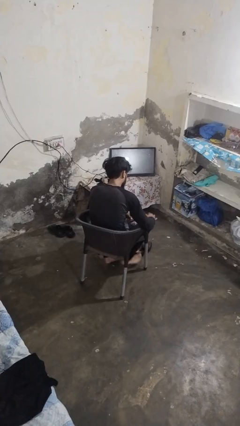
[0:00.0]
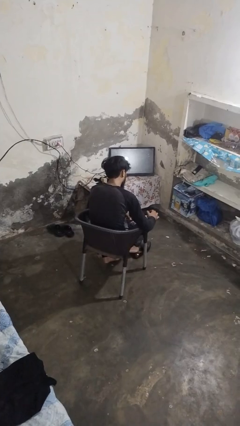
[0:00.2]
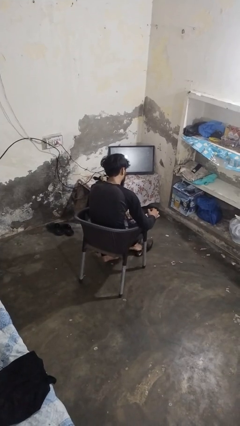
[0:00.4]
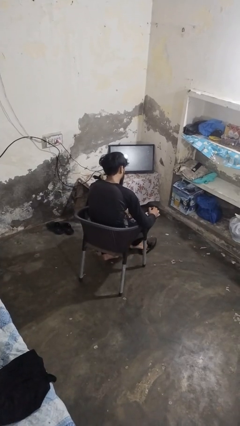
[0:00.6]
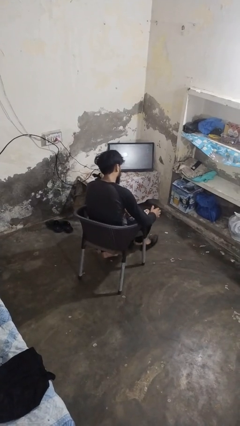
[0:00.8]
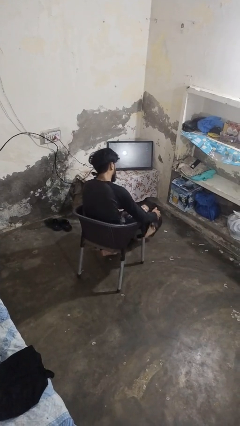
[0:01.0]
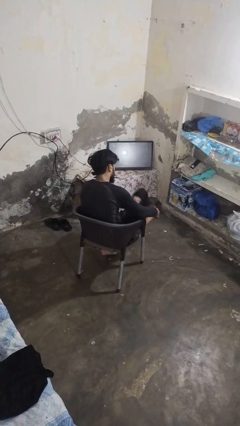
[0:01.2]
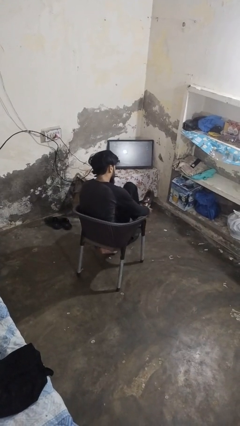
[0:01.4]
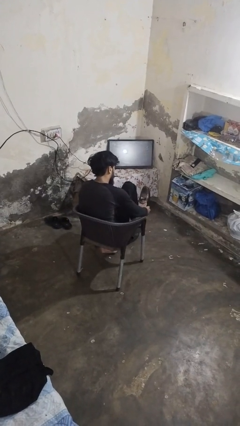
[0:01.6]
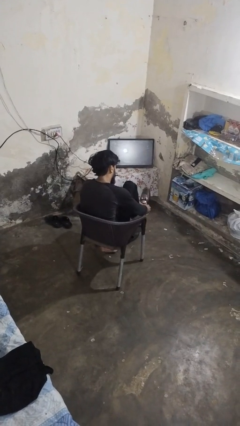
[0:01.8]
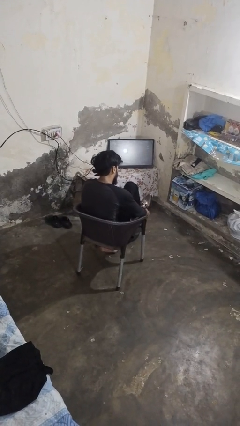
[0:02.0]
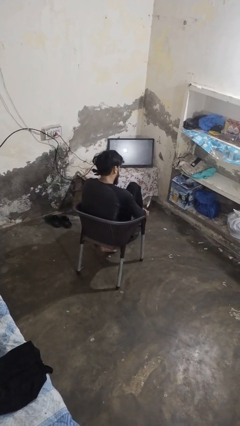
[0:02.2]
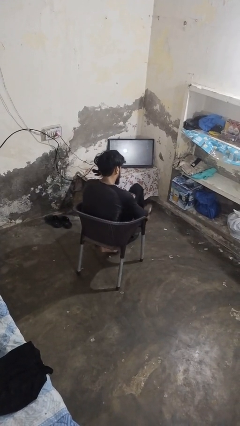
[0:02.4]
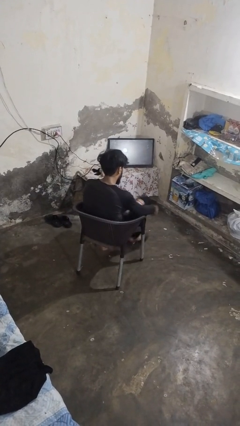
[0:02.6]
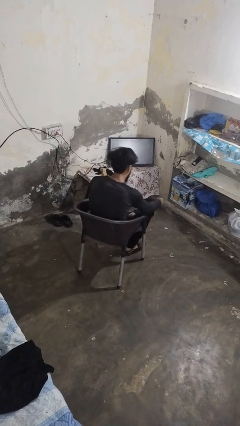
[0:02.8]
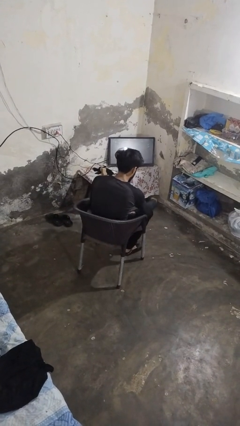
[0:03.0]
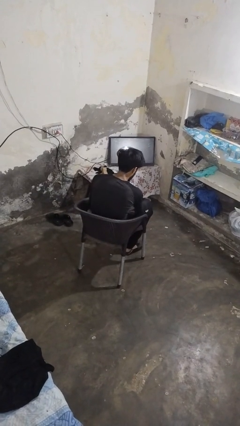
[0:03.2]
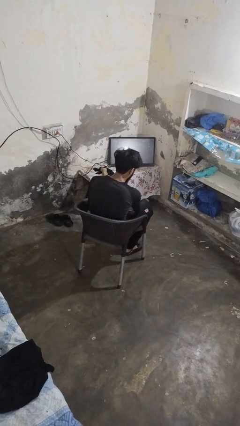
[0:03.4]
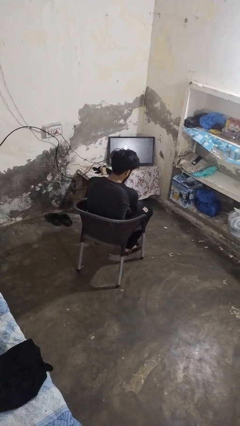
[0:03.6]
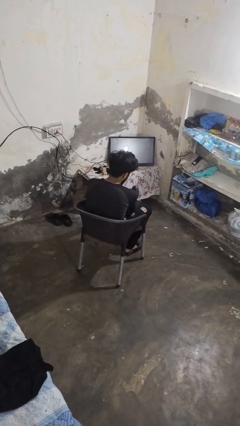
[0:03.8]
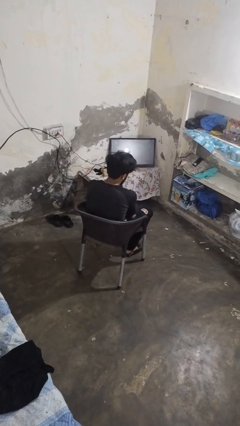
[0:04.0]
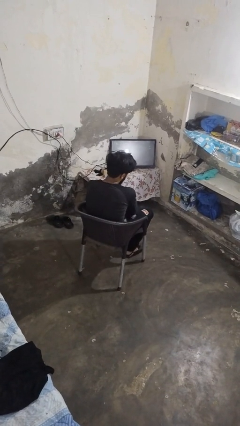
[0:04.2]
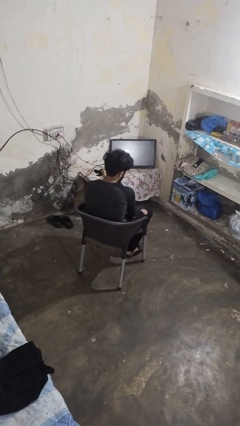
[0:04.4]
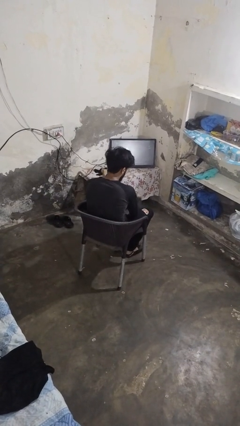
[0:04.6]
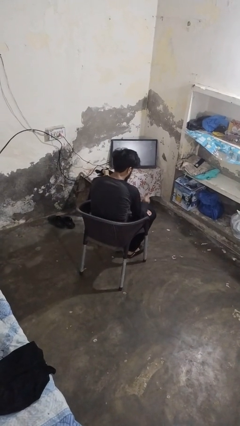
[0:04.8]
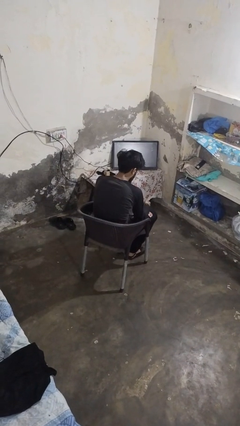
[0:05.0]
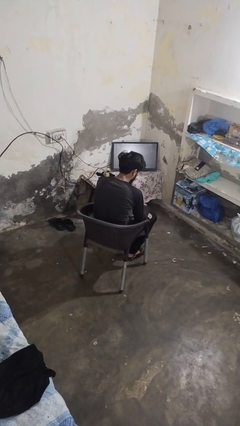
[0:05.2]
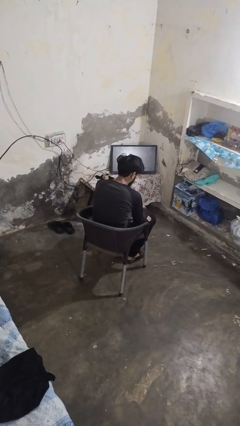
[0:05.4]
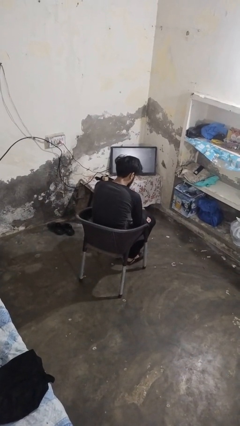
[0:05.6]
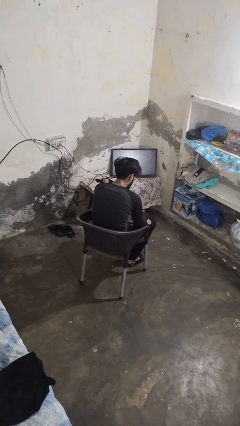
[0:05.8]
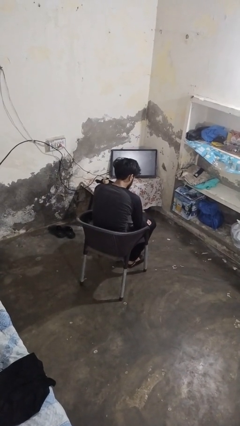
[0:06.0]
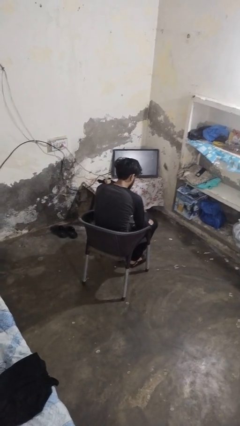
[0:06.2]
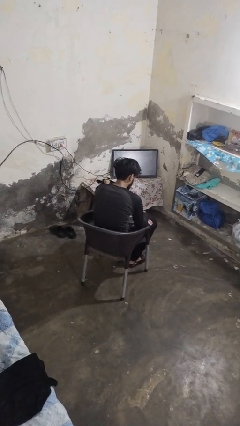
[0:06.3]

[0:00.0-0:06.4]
person puts on shoes

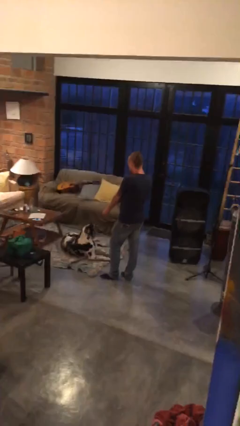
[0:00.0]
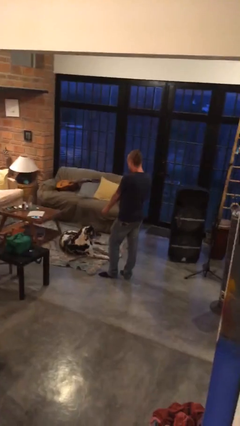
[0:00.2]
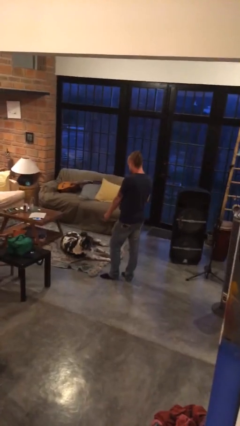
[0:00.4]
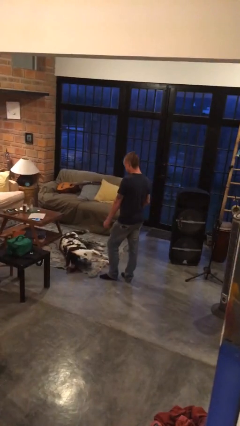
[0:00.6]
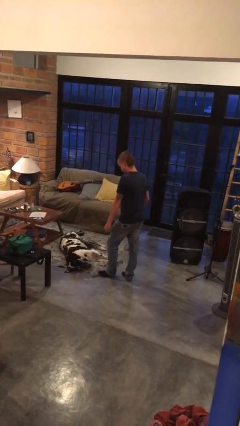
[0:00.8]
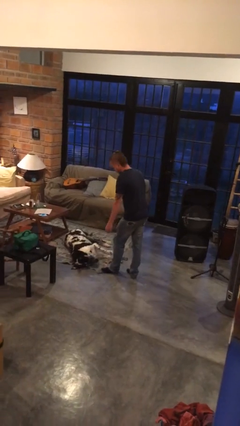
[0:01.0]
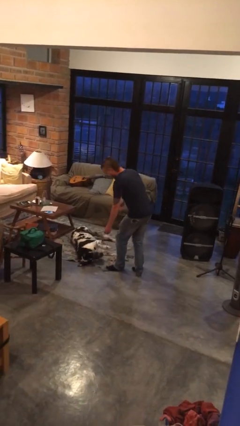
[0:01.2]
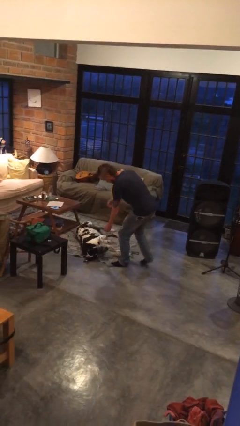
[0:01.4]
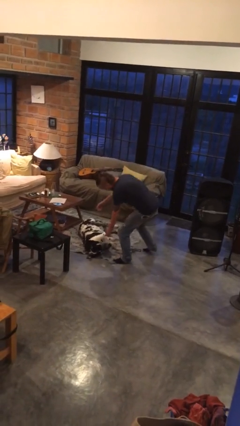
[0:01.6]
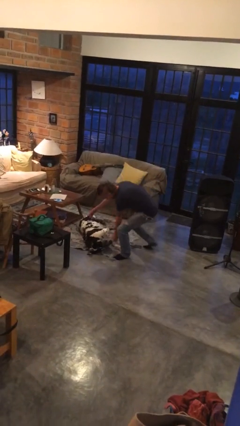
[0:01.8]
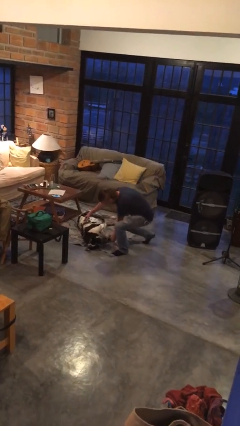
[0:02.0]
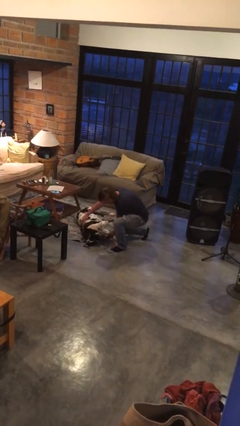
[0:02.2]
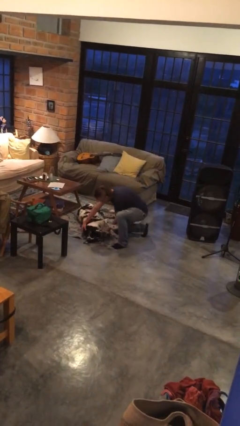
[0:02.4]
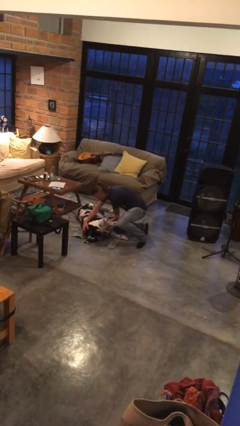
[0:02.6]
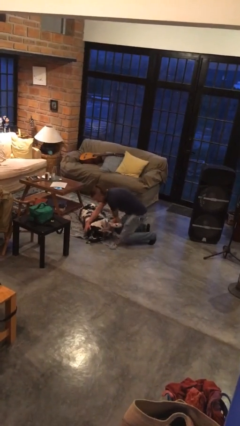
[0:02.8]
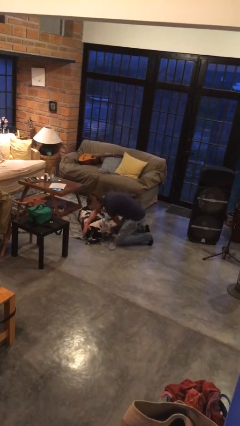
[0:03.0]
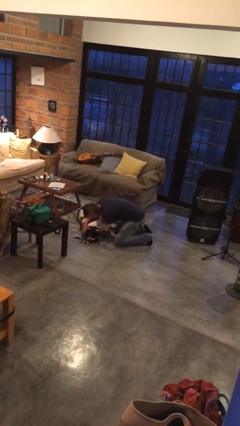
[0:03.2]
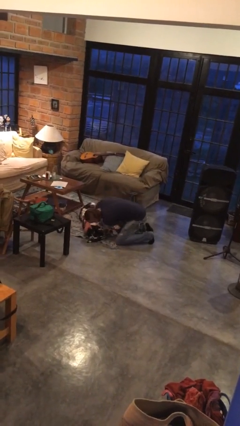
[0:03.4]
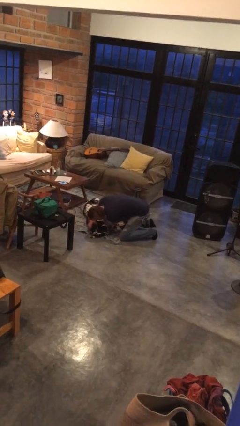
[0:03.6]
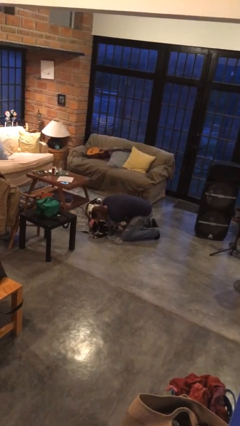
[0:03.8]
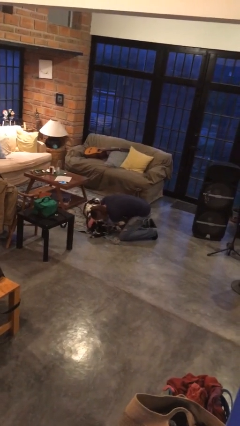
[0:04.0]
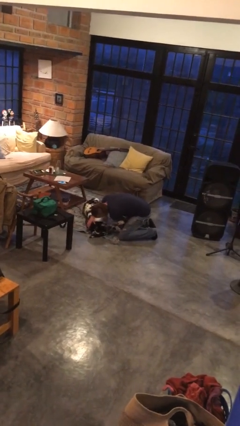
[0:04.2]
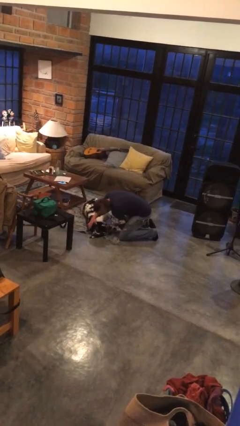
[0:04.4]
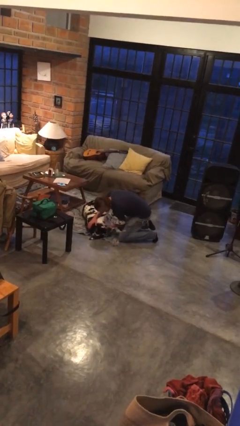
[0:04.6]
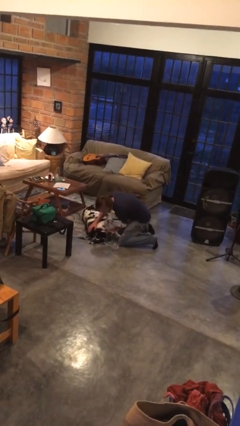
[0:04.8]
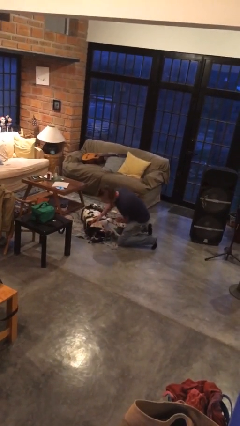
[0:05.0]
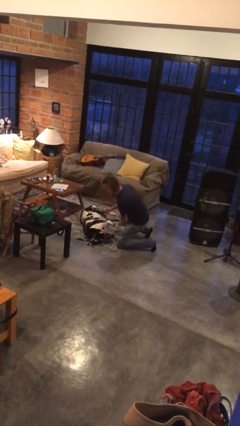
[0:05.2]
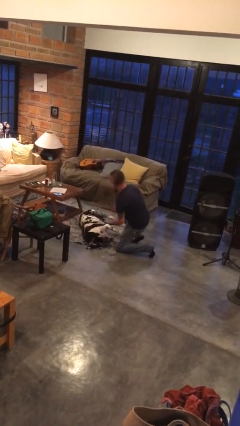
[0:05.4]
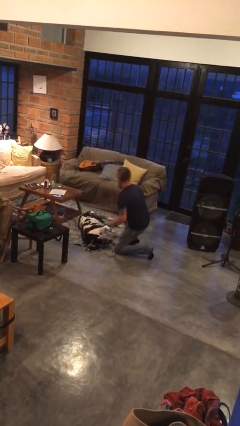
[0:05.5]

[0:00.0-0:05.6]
person hugs dog

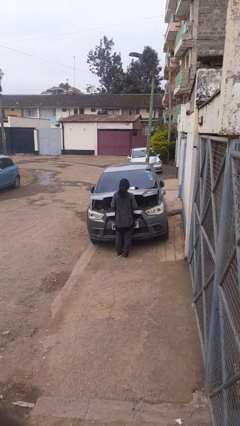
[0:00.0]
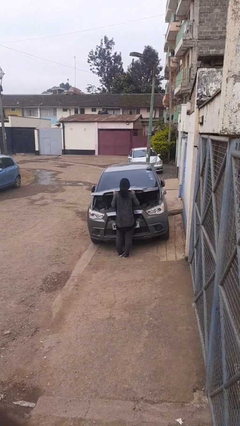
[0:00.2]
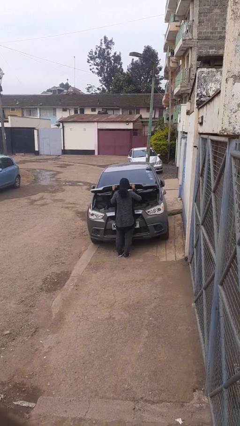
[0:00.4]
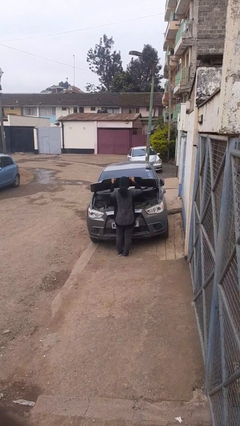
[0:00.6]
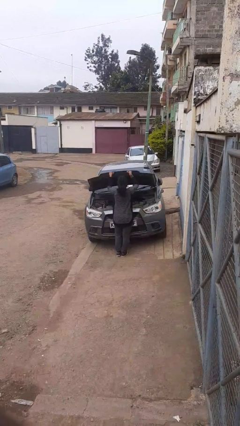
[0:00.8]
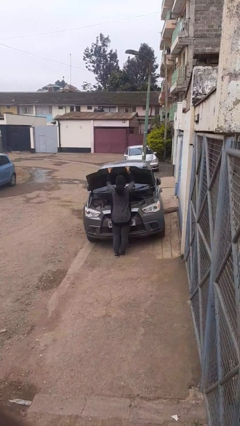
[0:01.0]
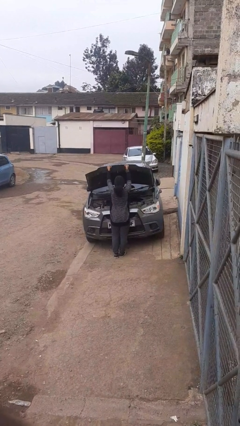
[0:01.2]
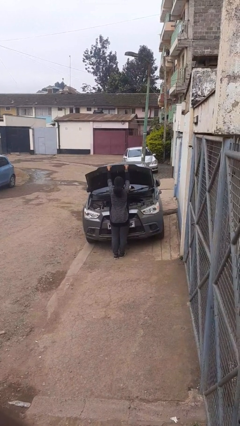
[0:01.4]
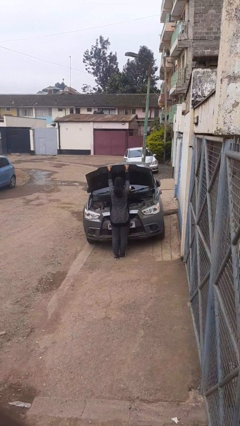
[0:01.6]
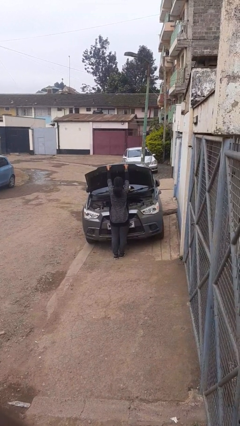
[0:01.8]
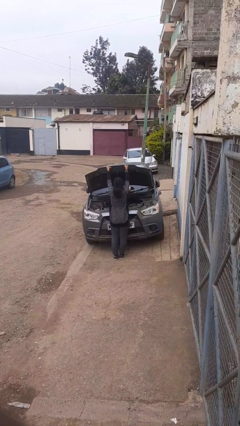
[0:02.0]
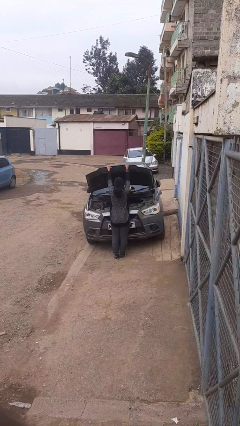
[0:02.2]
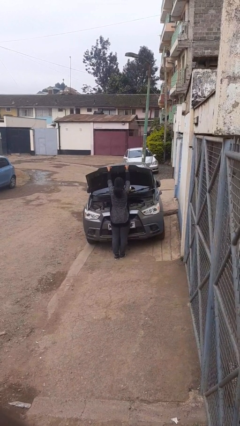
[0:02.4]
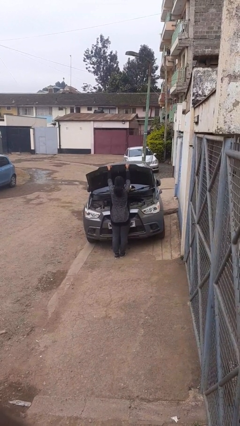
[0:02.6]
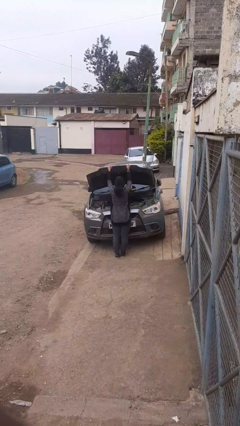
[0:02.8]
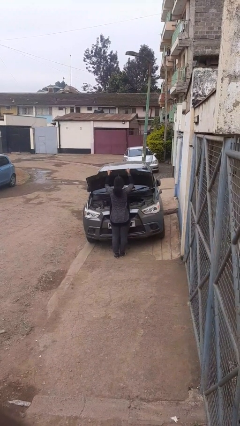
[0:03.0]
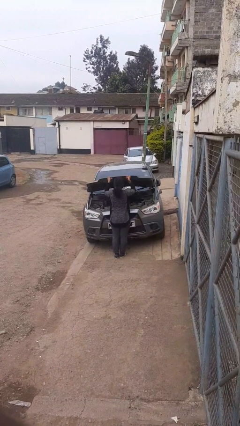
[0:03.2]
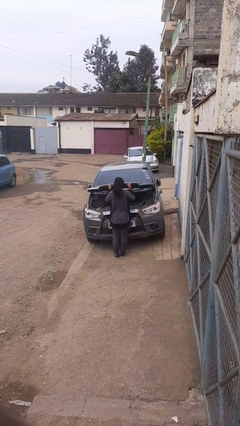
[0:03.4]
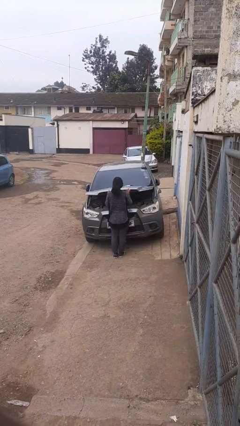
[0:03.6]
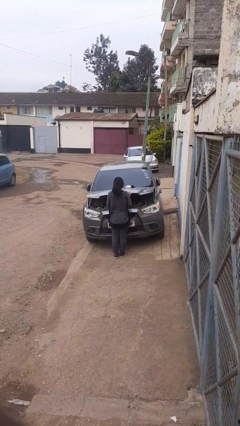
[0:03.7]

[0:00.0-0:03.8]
person opens car hood

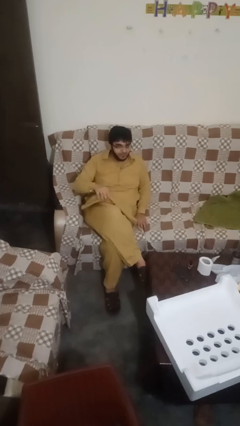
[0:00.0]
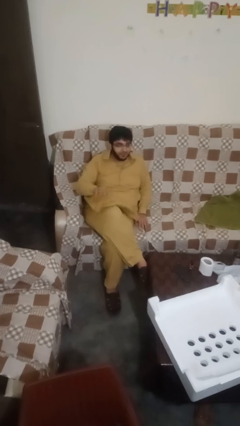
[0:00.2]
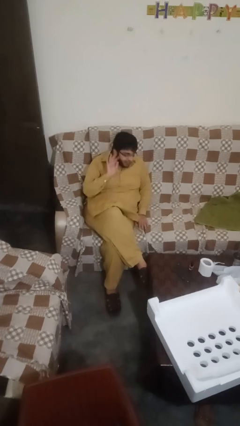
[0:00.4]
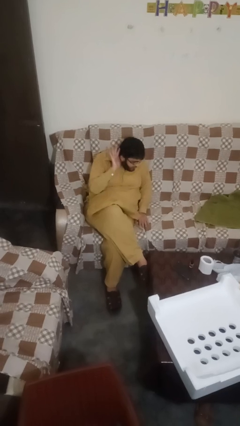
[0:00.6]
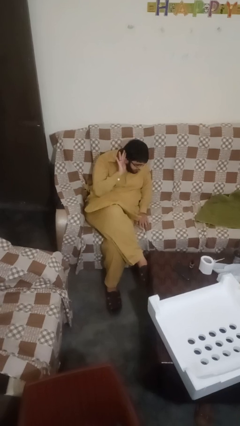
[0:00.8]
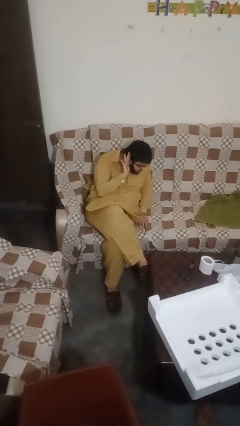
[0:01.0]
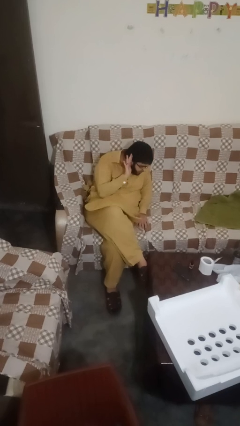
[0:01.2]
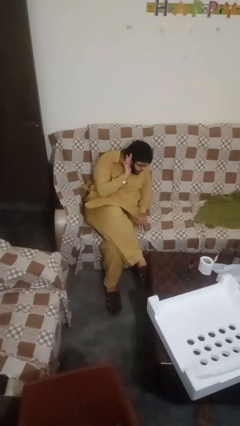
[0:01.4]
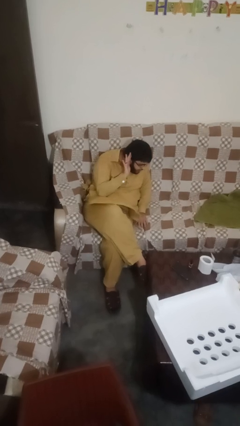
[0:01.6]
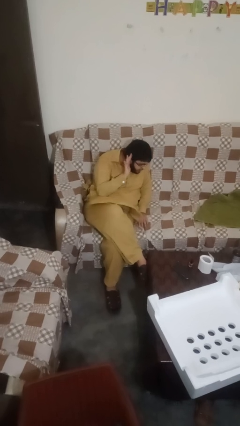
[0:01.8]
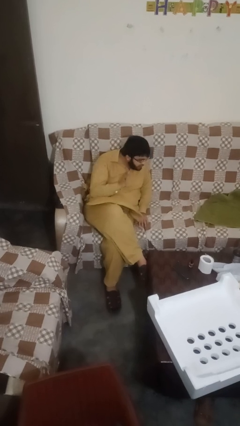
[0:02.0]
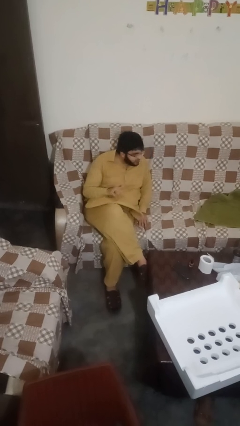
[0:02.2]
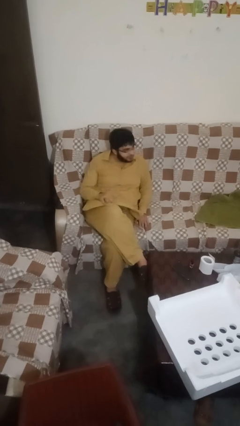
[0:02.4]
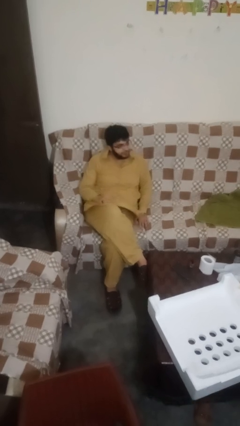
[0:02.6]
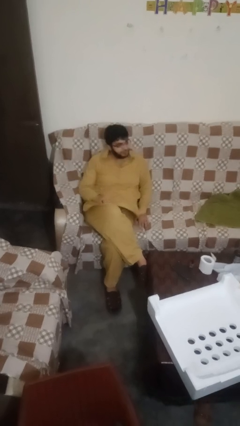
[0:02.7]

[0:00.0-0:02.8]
person gestures listen closely
